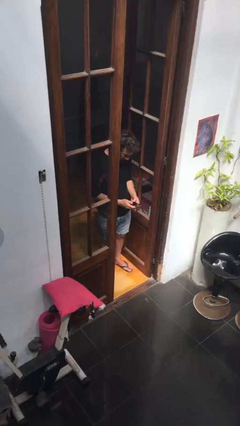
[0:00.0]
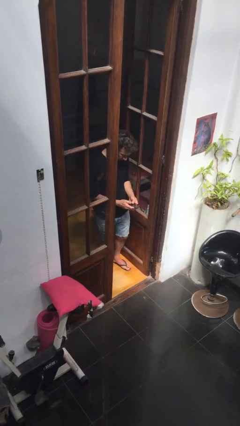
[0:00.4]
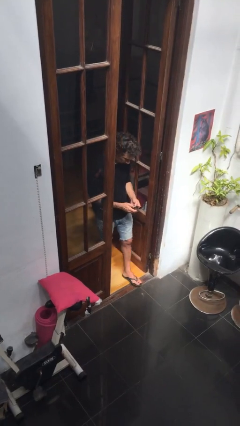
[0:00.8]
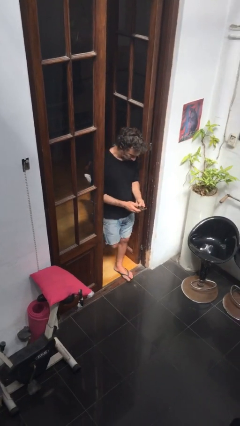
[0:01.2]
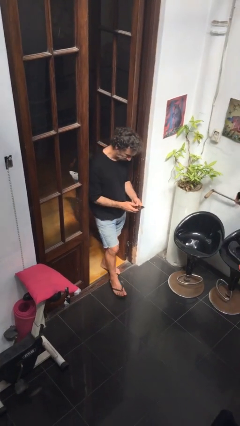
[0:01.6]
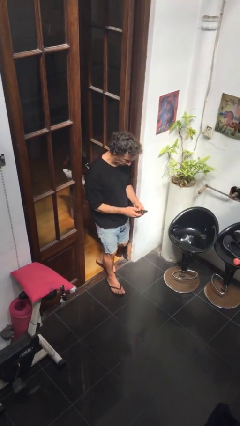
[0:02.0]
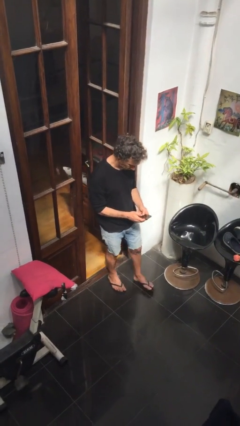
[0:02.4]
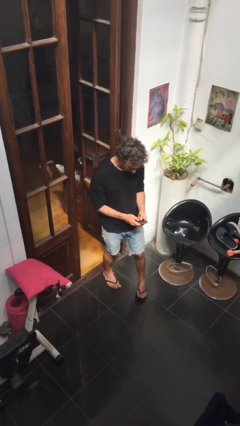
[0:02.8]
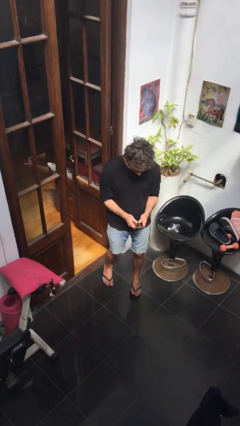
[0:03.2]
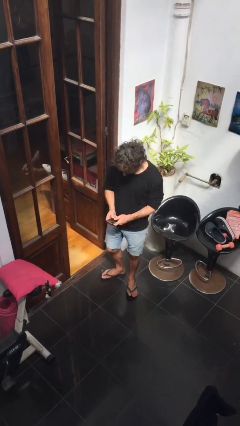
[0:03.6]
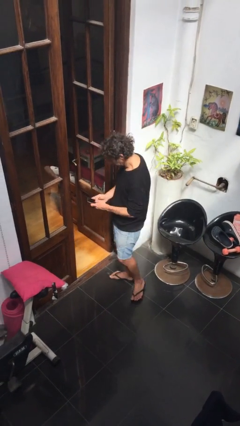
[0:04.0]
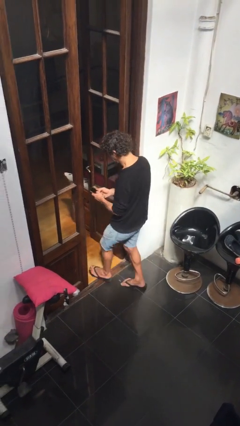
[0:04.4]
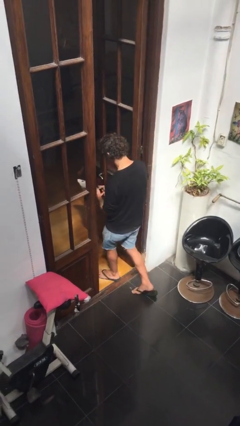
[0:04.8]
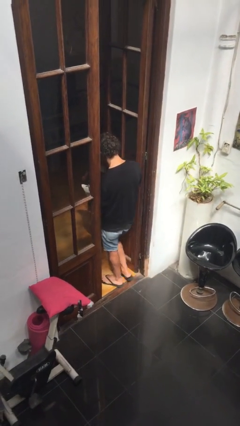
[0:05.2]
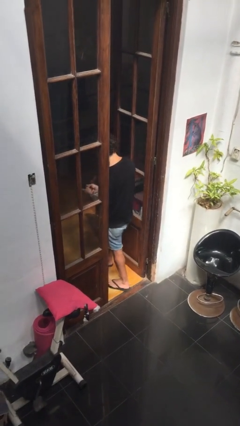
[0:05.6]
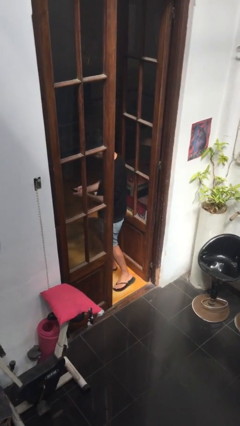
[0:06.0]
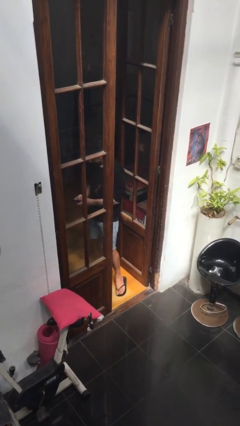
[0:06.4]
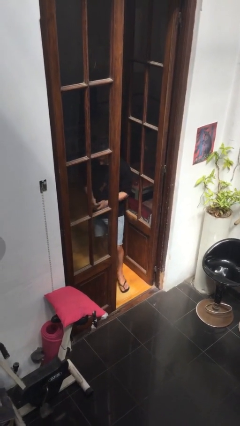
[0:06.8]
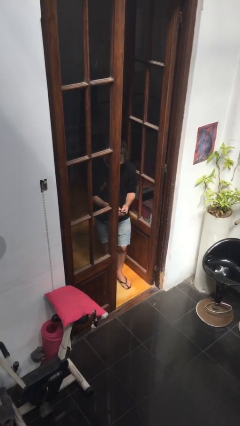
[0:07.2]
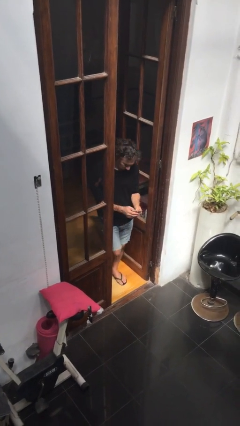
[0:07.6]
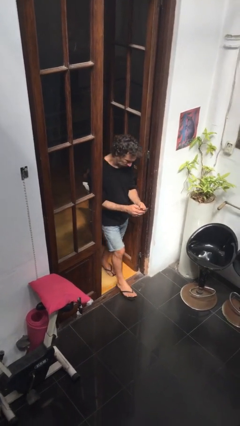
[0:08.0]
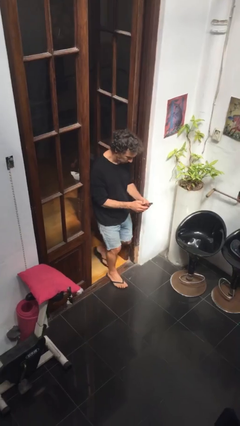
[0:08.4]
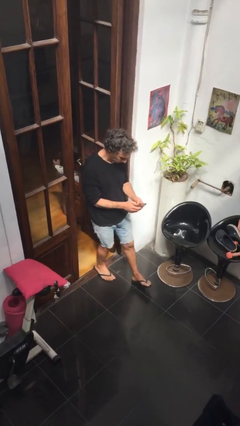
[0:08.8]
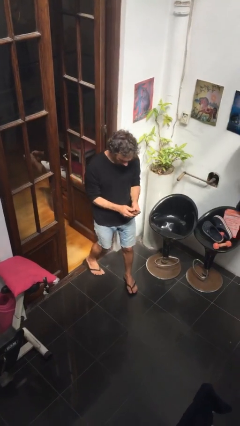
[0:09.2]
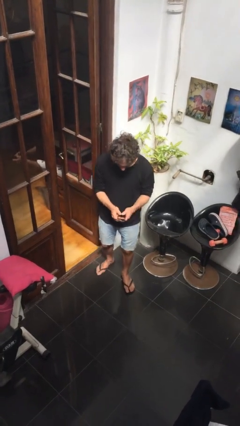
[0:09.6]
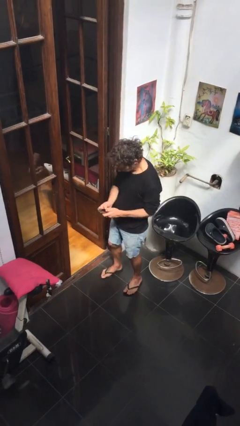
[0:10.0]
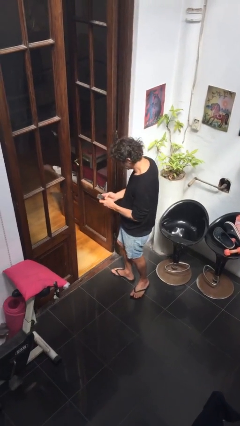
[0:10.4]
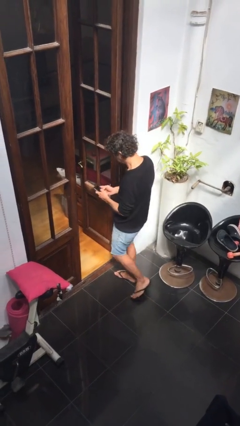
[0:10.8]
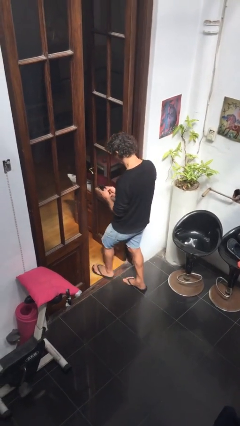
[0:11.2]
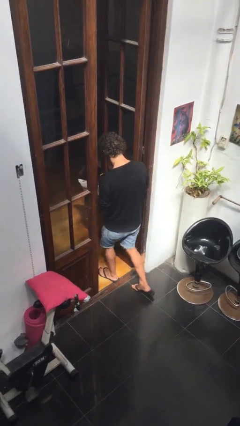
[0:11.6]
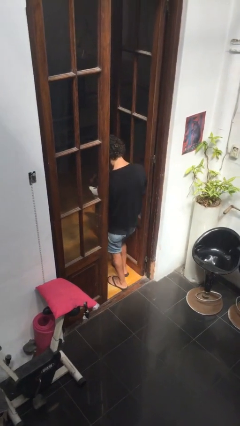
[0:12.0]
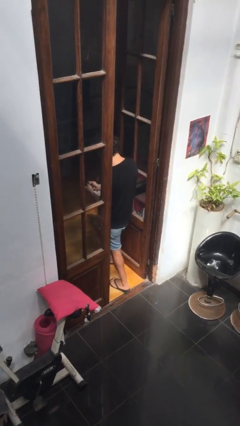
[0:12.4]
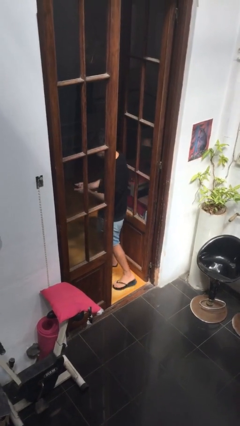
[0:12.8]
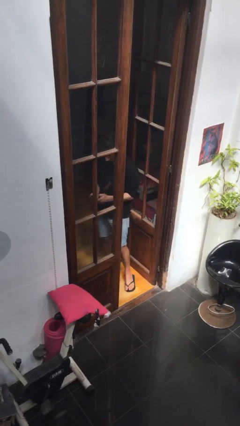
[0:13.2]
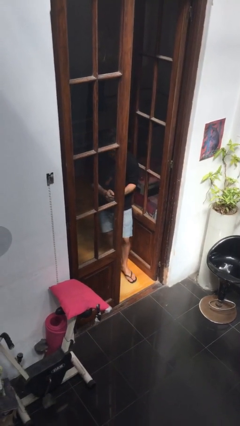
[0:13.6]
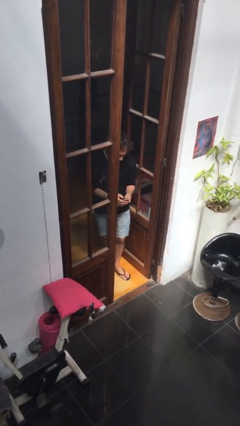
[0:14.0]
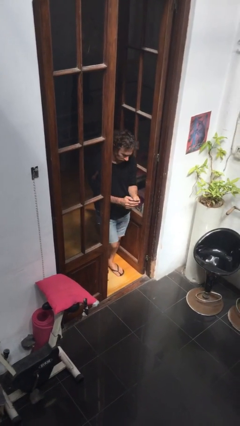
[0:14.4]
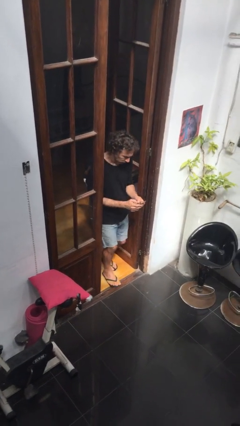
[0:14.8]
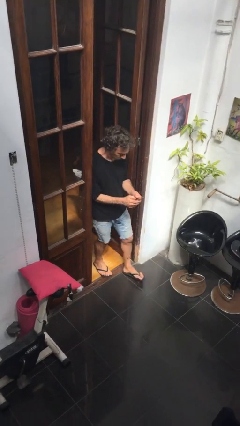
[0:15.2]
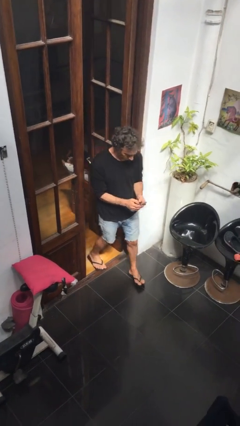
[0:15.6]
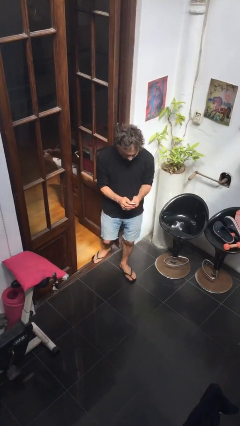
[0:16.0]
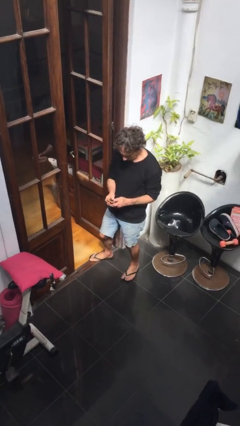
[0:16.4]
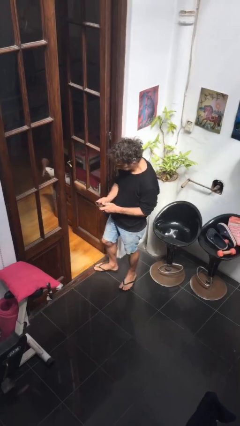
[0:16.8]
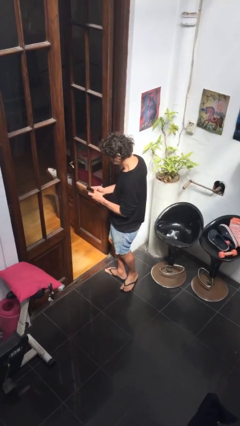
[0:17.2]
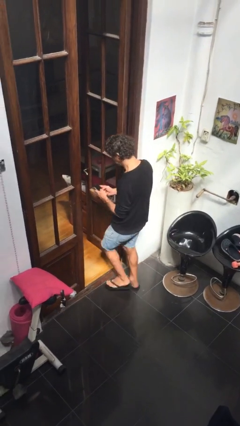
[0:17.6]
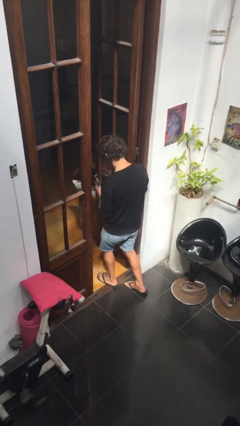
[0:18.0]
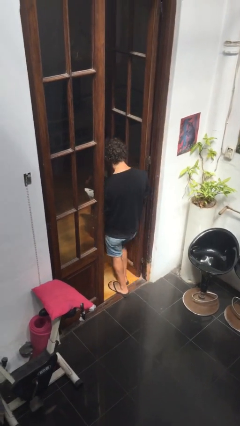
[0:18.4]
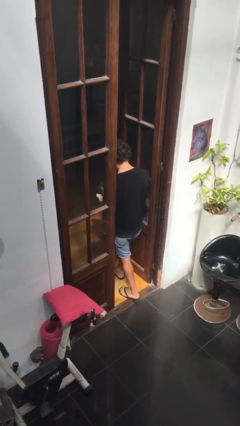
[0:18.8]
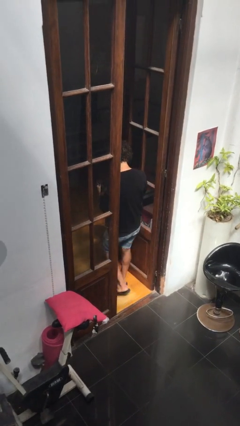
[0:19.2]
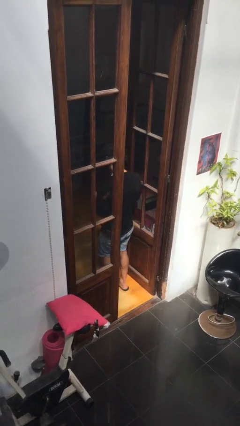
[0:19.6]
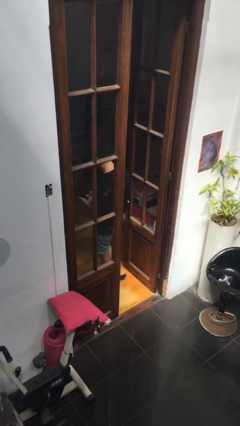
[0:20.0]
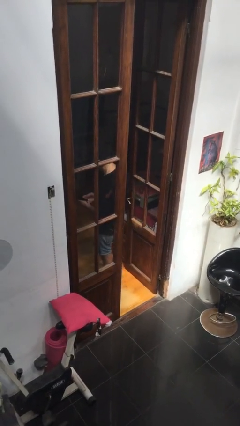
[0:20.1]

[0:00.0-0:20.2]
person texts on phone

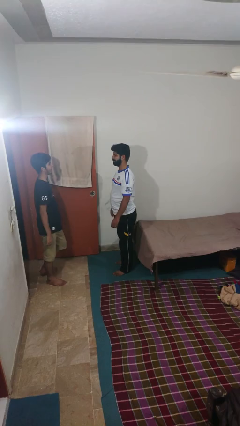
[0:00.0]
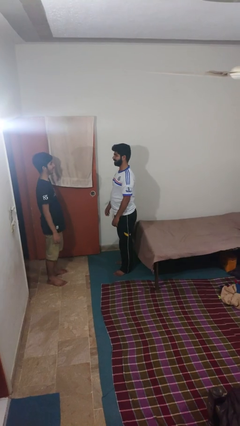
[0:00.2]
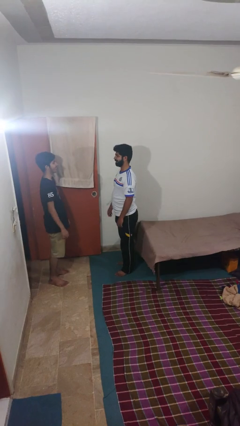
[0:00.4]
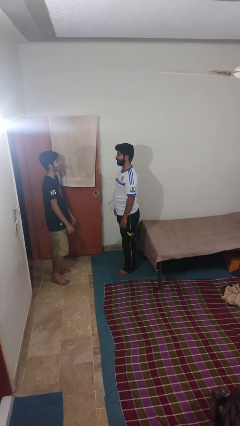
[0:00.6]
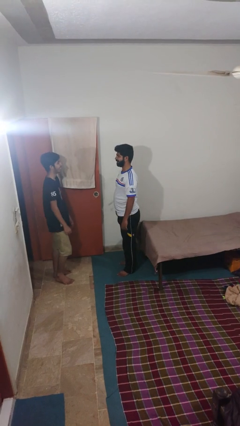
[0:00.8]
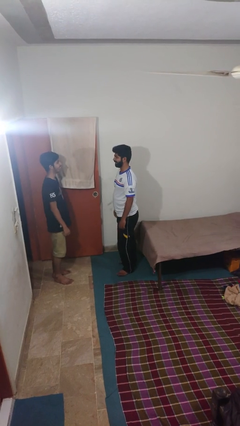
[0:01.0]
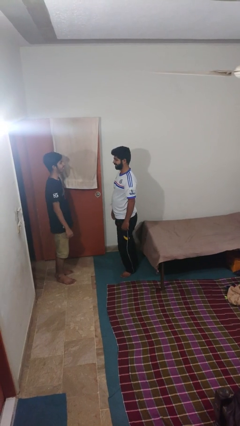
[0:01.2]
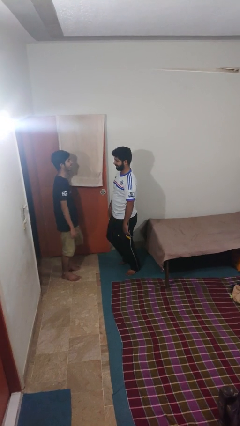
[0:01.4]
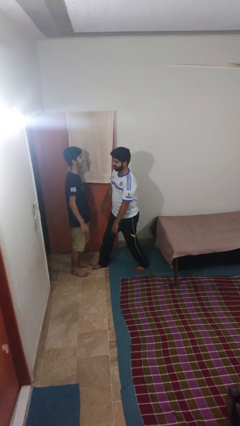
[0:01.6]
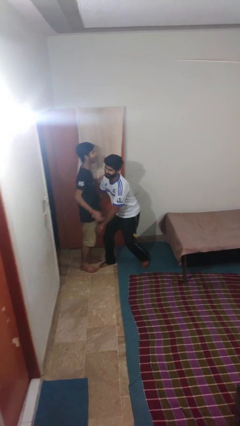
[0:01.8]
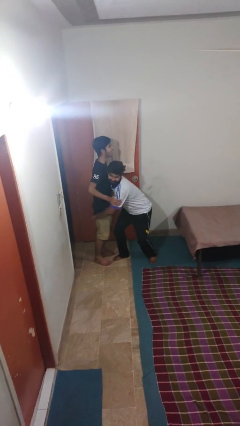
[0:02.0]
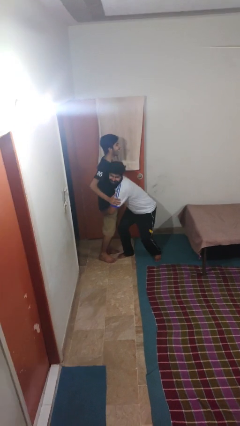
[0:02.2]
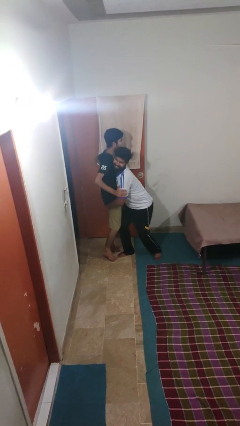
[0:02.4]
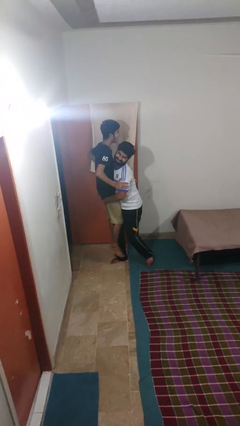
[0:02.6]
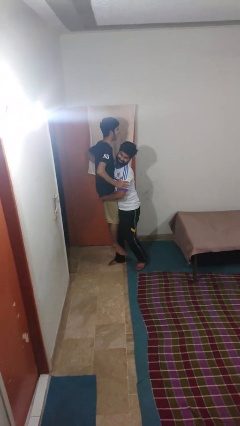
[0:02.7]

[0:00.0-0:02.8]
person picks up person

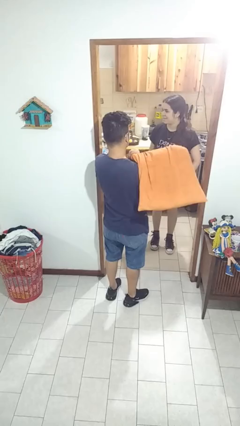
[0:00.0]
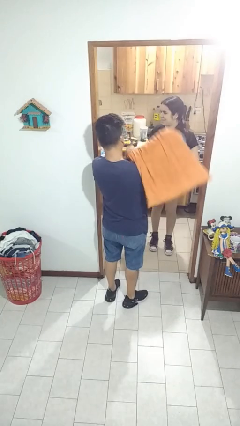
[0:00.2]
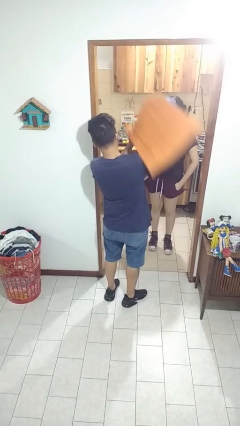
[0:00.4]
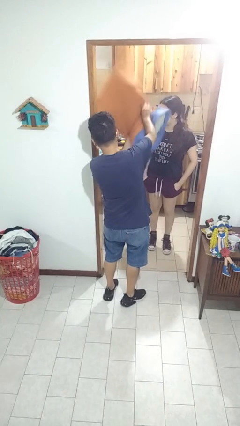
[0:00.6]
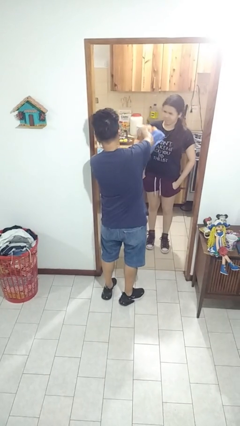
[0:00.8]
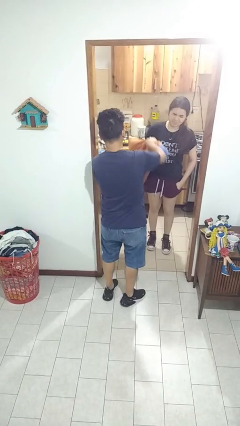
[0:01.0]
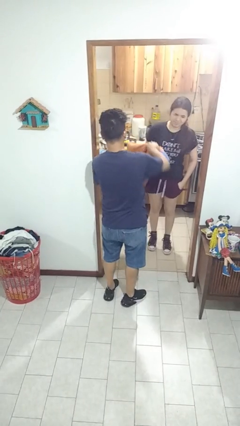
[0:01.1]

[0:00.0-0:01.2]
person hits person with pillow

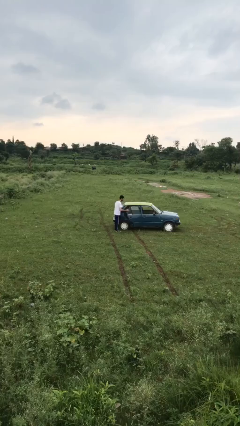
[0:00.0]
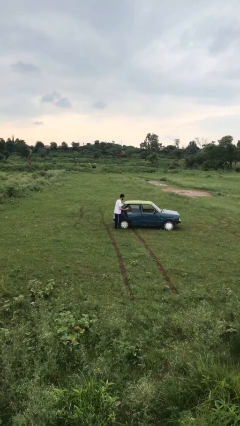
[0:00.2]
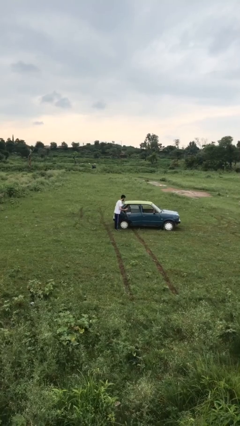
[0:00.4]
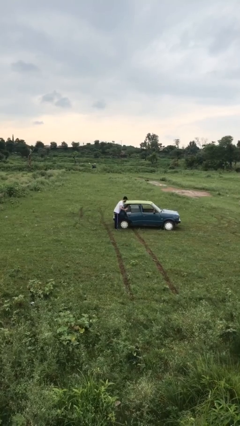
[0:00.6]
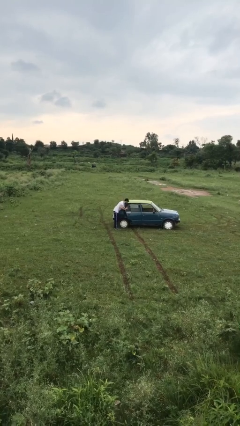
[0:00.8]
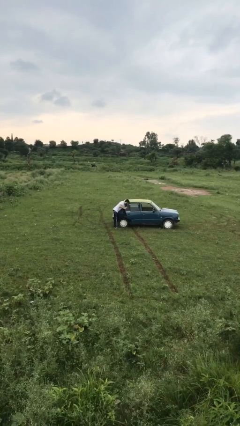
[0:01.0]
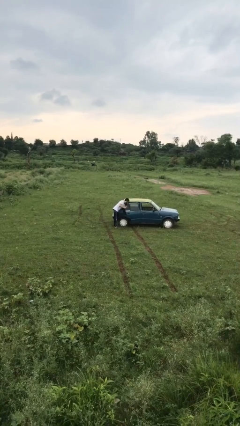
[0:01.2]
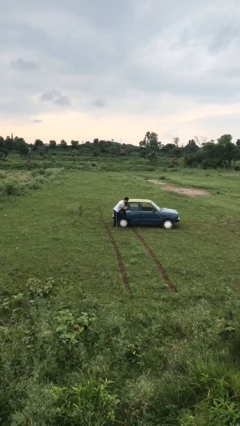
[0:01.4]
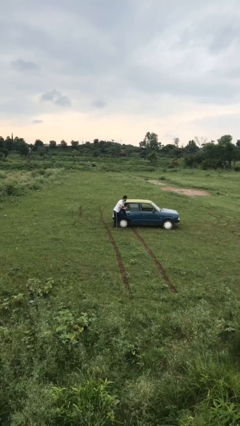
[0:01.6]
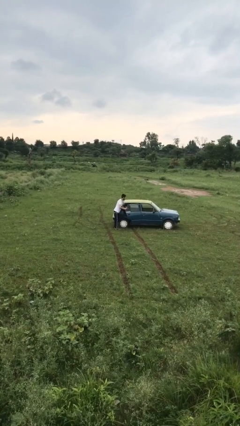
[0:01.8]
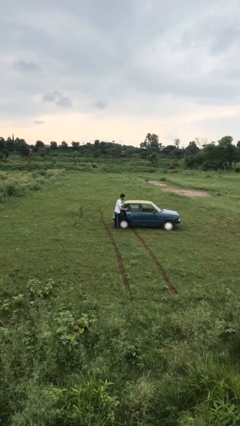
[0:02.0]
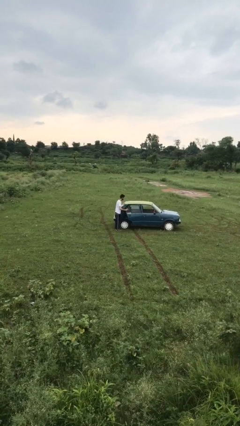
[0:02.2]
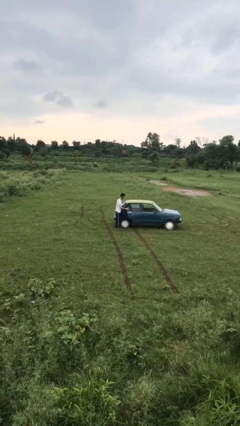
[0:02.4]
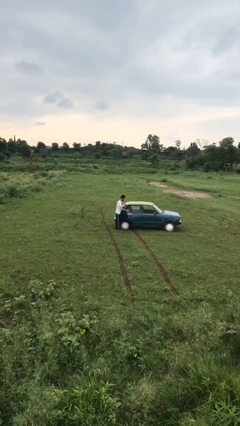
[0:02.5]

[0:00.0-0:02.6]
person unloads car

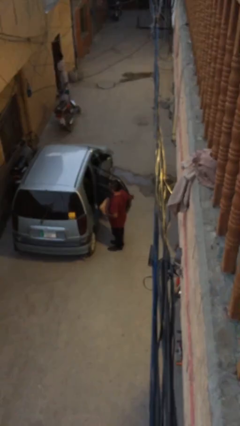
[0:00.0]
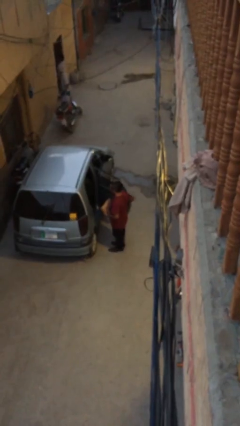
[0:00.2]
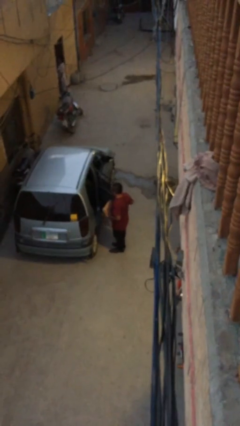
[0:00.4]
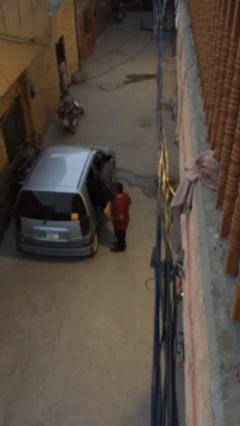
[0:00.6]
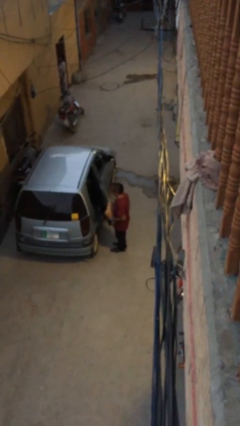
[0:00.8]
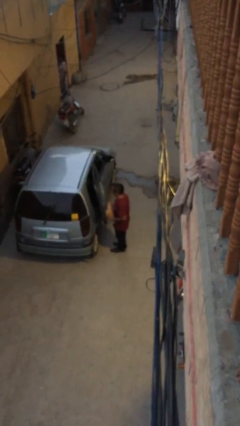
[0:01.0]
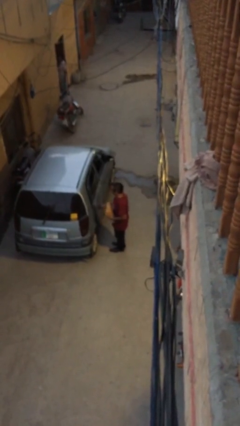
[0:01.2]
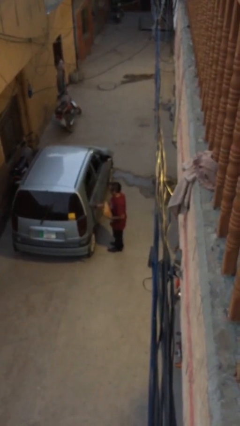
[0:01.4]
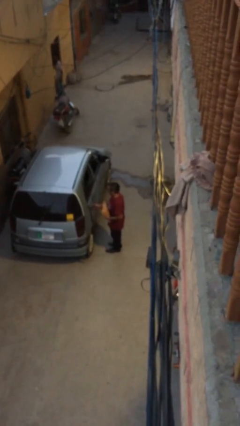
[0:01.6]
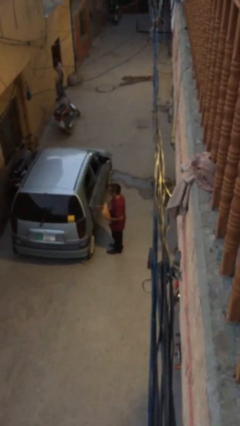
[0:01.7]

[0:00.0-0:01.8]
person closes car door
